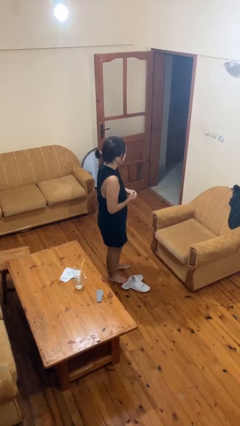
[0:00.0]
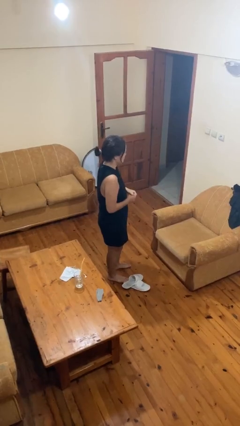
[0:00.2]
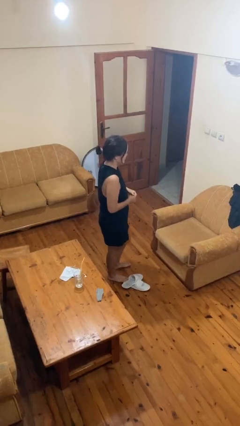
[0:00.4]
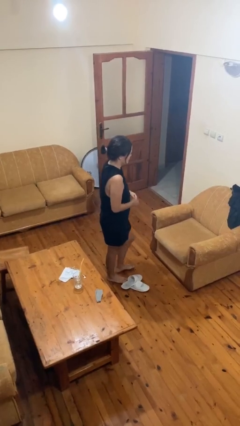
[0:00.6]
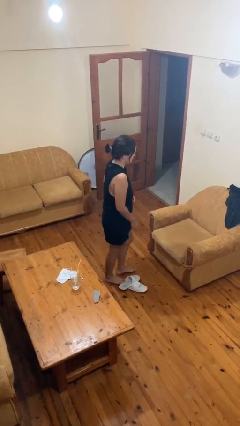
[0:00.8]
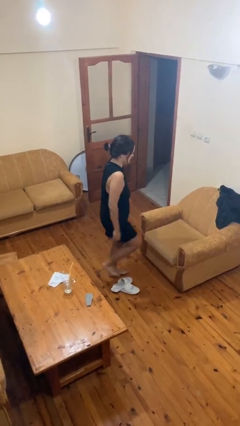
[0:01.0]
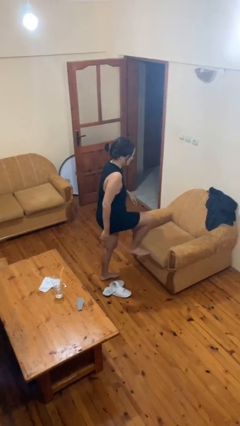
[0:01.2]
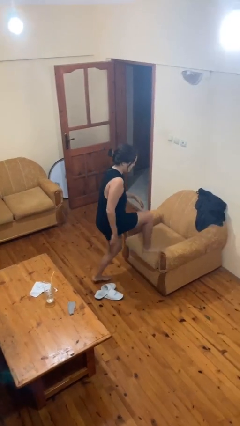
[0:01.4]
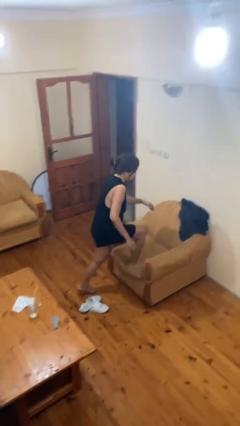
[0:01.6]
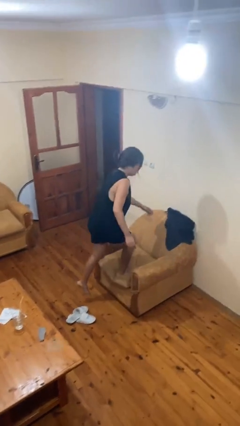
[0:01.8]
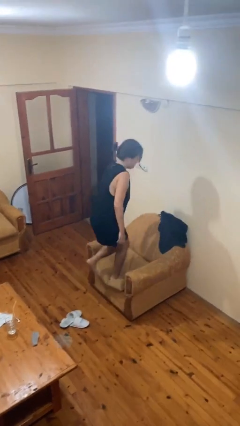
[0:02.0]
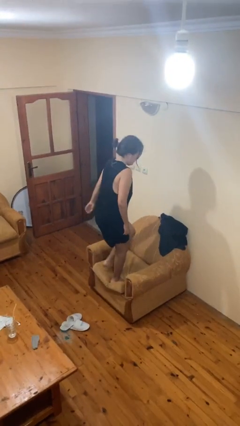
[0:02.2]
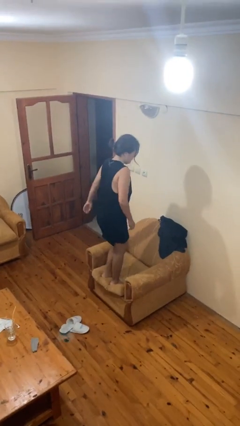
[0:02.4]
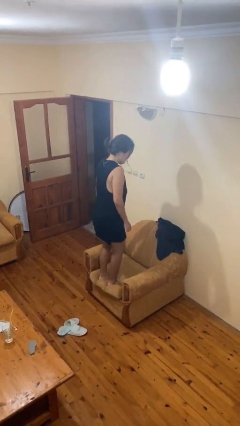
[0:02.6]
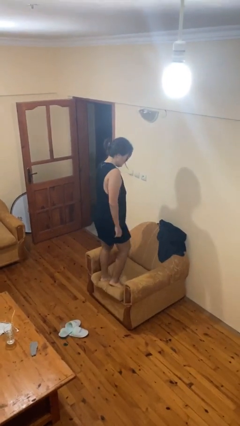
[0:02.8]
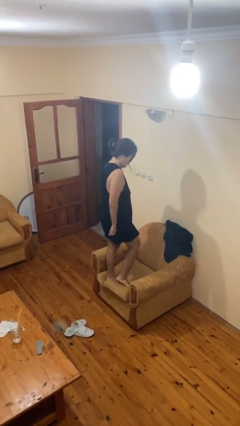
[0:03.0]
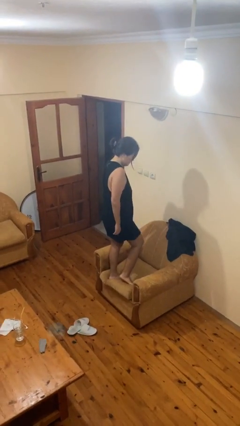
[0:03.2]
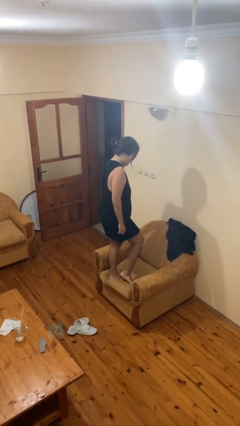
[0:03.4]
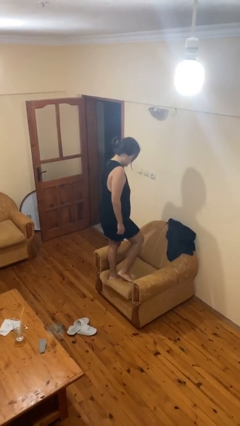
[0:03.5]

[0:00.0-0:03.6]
person climbs on chair

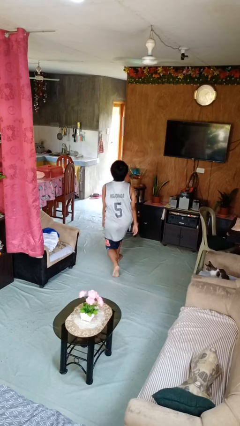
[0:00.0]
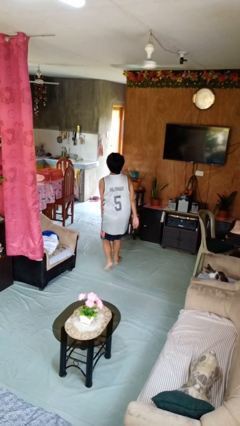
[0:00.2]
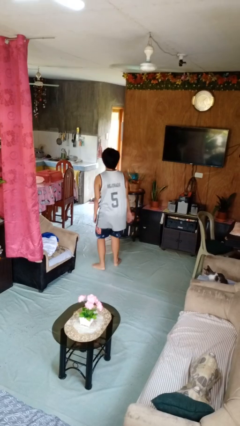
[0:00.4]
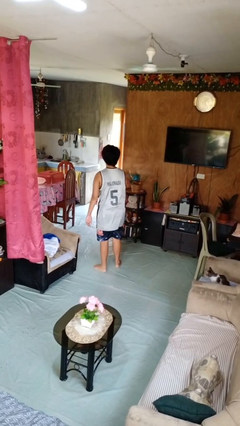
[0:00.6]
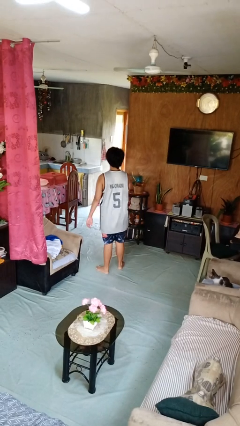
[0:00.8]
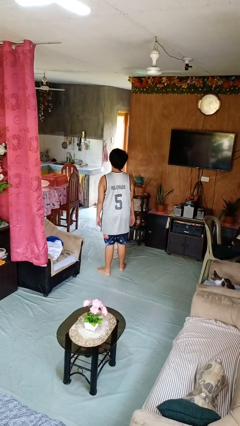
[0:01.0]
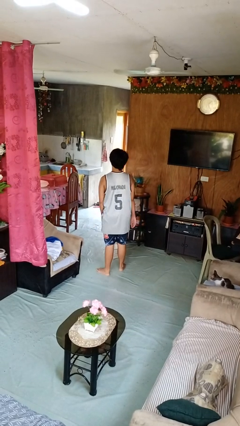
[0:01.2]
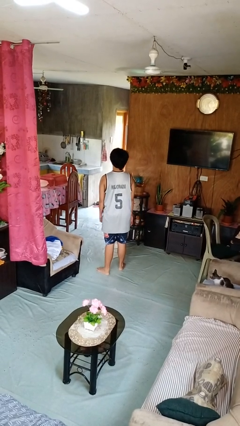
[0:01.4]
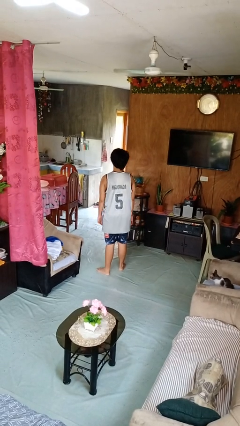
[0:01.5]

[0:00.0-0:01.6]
person stands up from floor

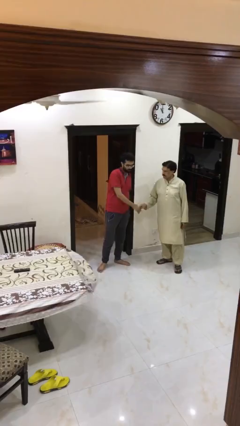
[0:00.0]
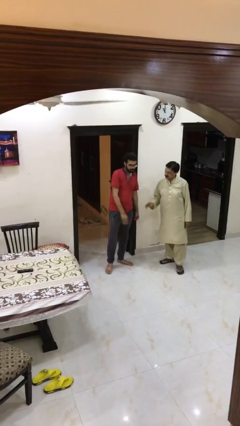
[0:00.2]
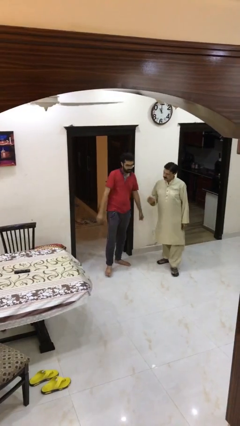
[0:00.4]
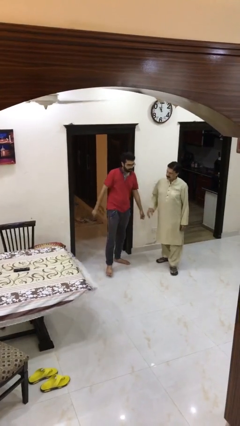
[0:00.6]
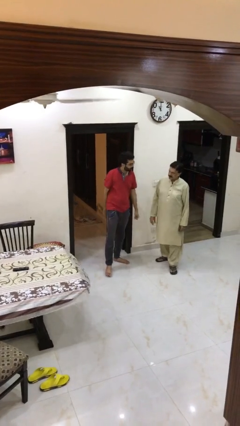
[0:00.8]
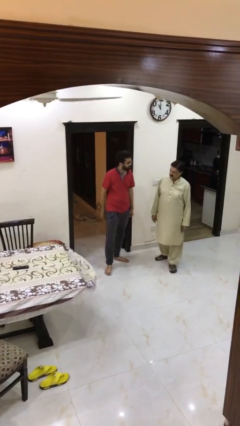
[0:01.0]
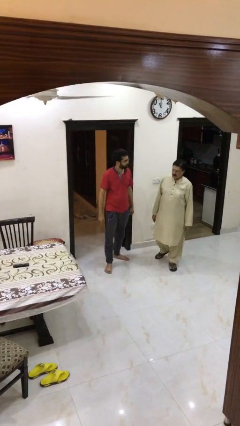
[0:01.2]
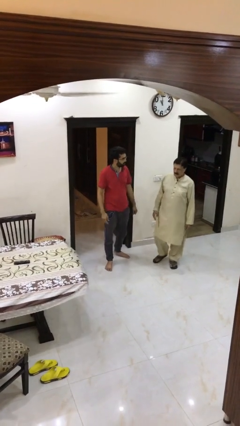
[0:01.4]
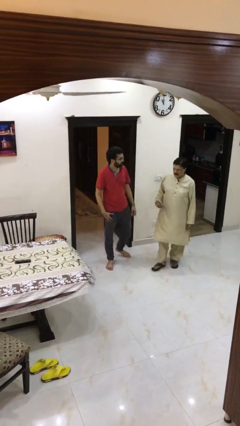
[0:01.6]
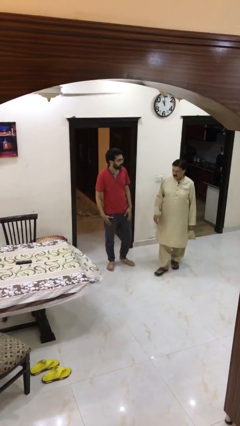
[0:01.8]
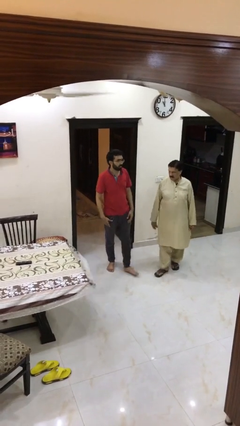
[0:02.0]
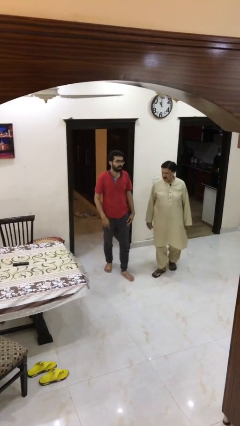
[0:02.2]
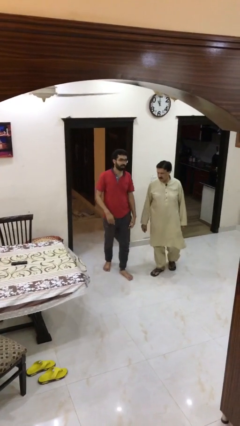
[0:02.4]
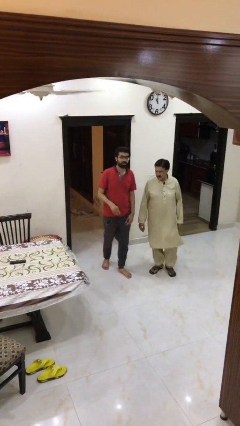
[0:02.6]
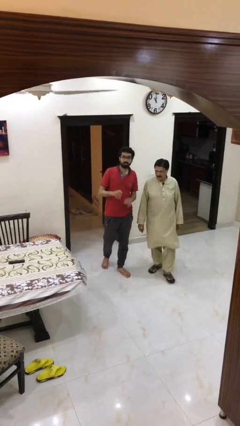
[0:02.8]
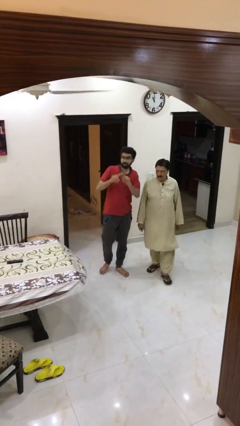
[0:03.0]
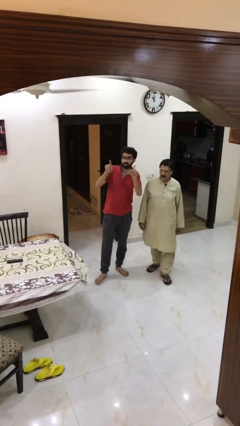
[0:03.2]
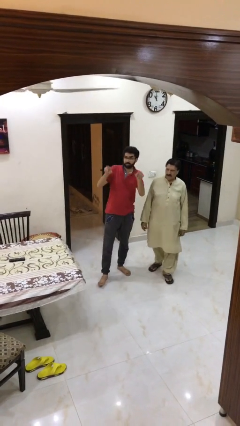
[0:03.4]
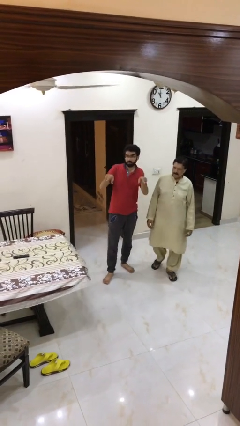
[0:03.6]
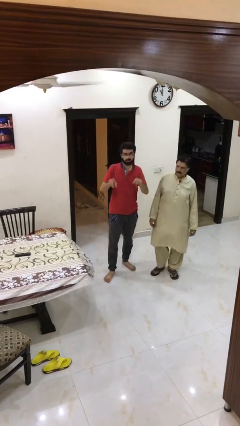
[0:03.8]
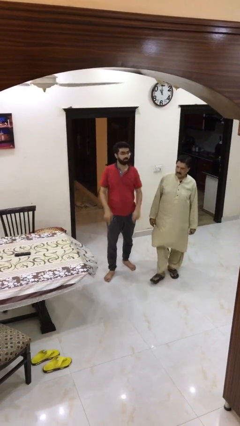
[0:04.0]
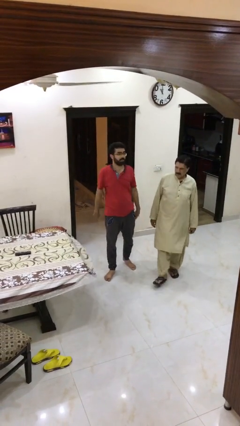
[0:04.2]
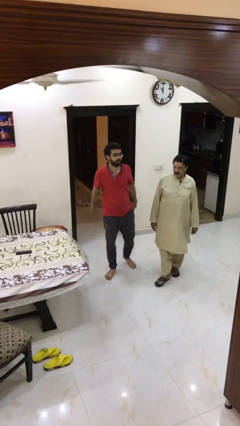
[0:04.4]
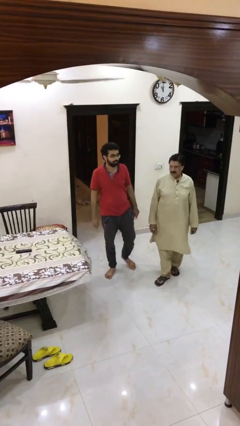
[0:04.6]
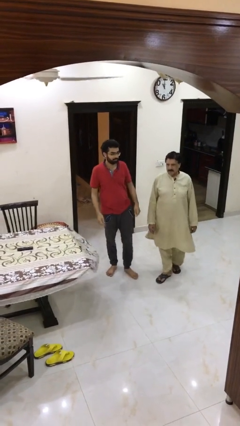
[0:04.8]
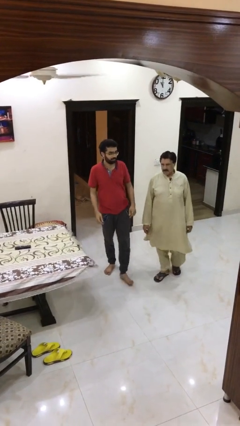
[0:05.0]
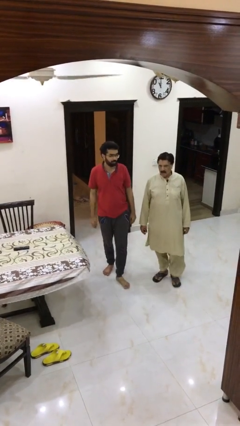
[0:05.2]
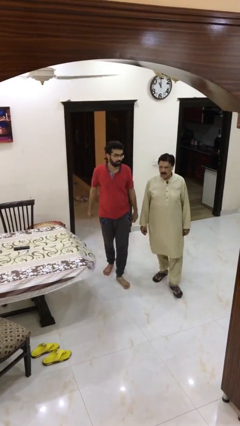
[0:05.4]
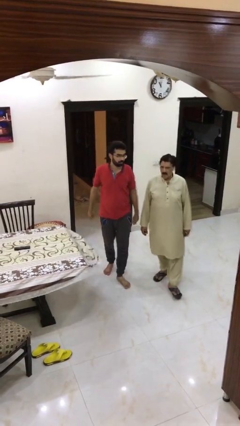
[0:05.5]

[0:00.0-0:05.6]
person talks to person

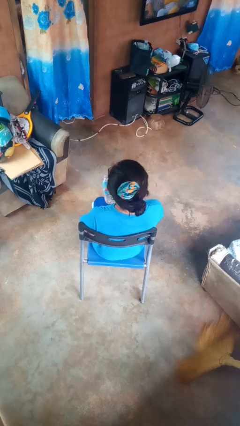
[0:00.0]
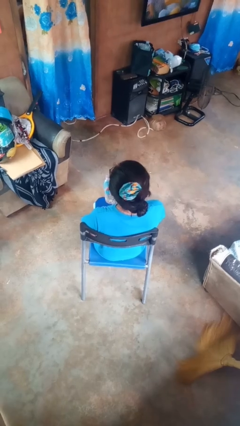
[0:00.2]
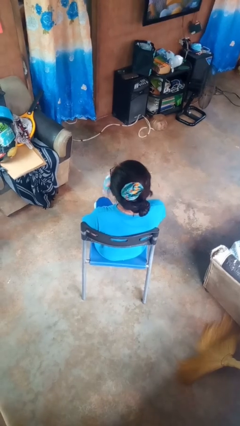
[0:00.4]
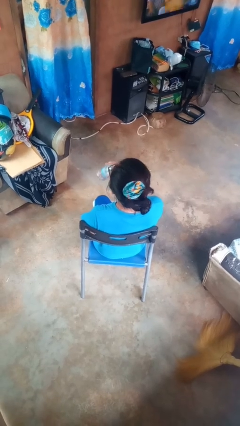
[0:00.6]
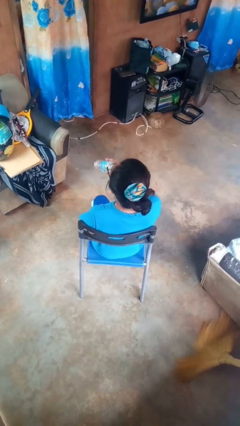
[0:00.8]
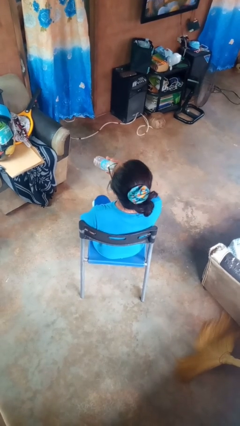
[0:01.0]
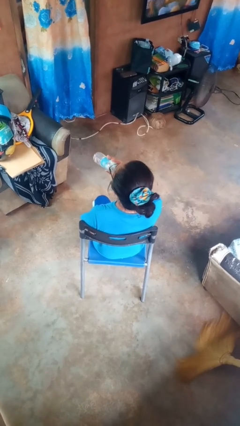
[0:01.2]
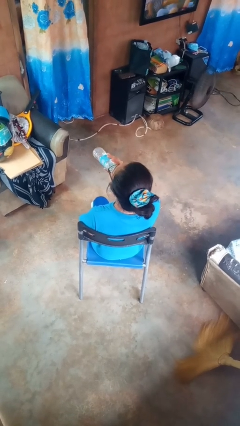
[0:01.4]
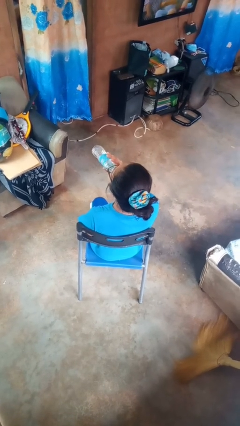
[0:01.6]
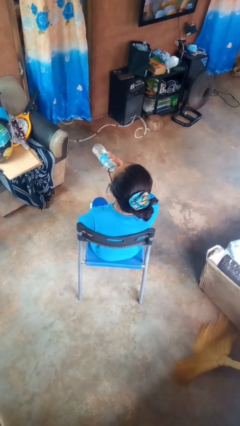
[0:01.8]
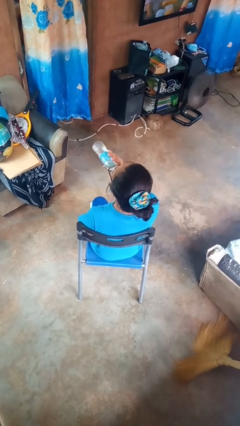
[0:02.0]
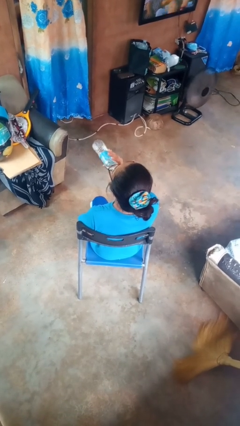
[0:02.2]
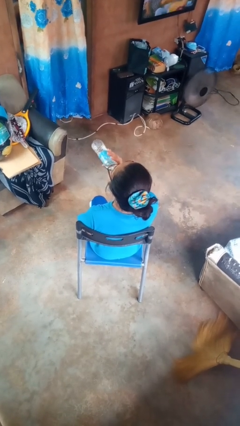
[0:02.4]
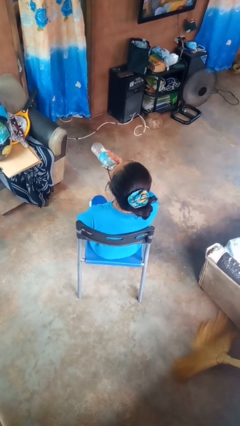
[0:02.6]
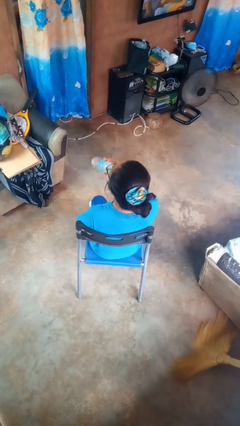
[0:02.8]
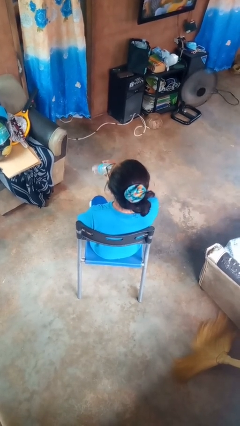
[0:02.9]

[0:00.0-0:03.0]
person drinks from bottle

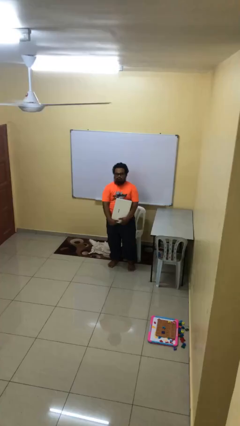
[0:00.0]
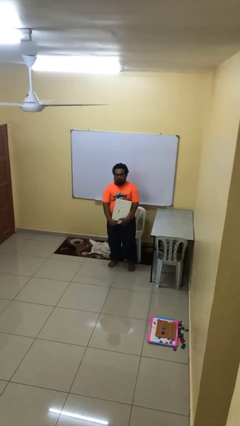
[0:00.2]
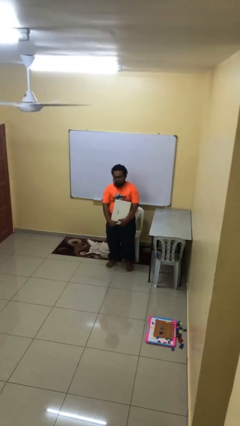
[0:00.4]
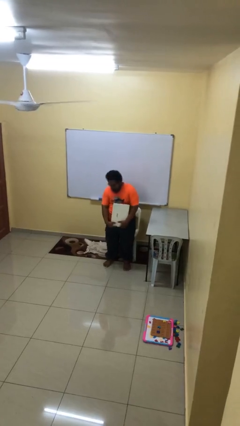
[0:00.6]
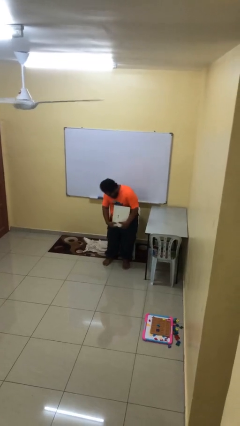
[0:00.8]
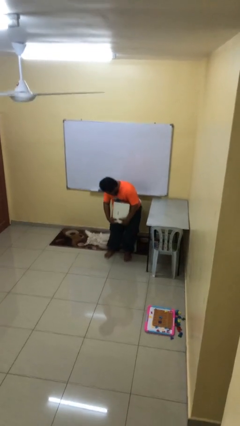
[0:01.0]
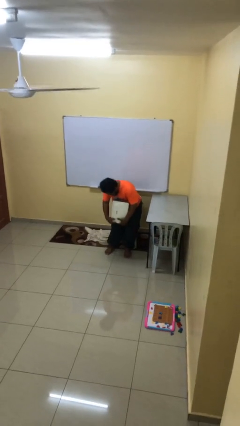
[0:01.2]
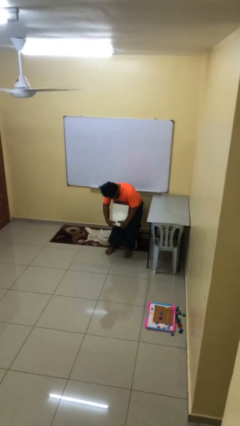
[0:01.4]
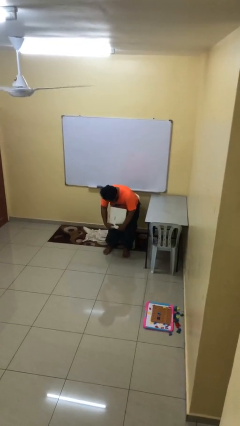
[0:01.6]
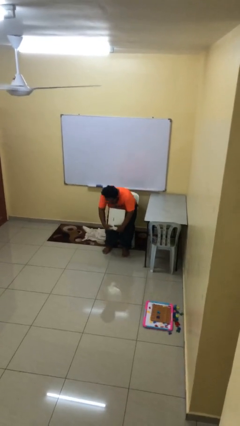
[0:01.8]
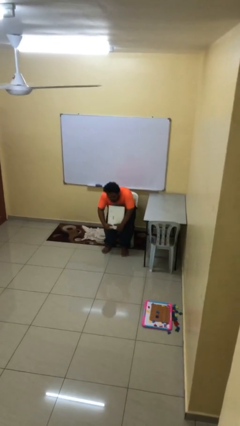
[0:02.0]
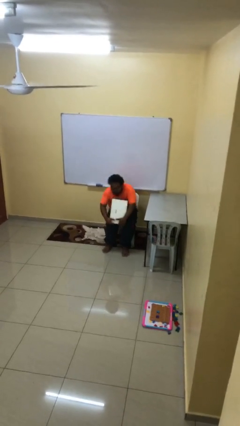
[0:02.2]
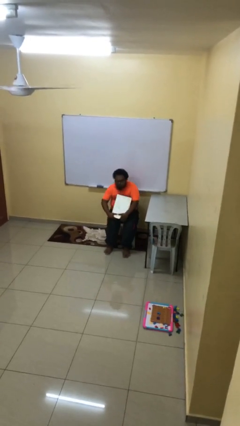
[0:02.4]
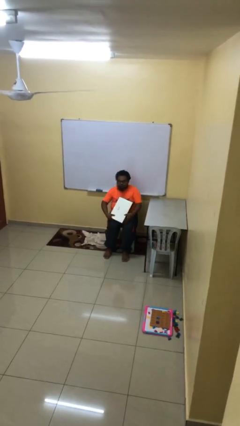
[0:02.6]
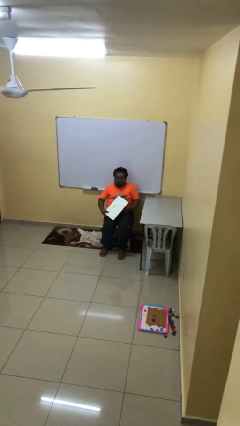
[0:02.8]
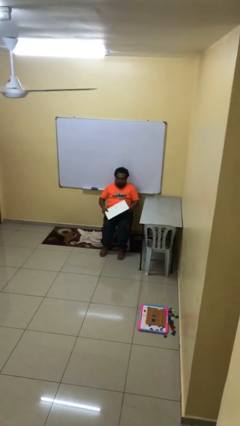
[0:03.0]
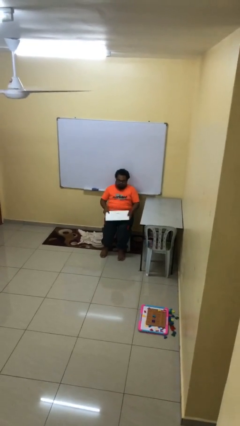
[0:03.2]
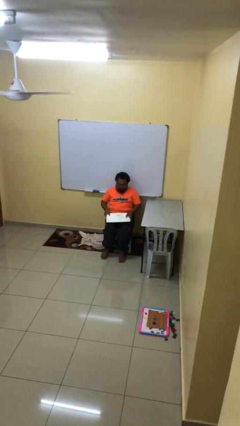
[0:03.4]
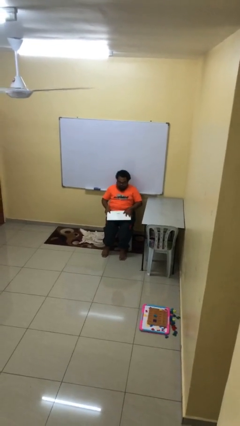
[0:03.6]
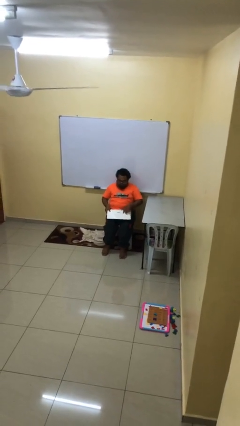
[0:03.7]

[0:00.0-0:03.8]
person sits down

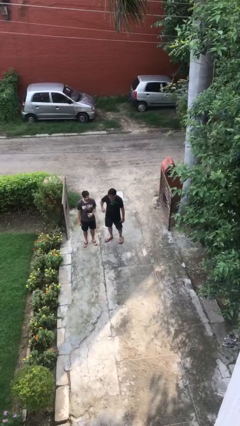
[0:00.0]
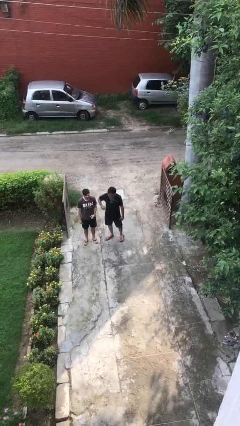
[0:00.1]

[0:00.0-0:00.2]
person nudges person with elbow
